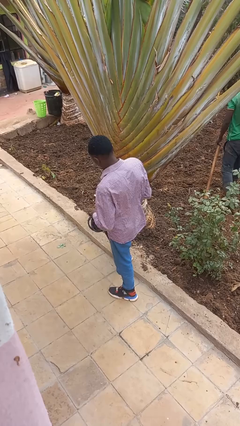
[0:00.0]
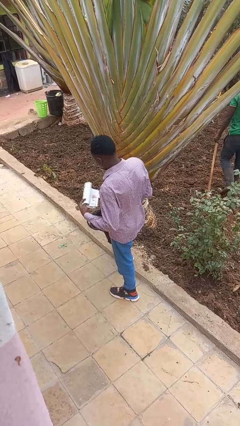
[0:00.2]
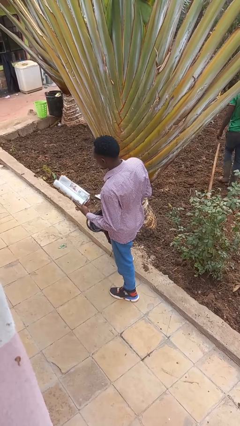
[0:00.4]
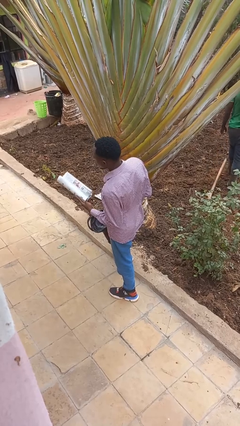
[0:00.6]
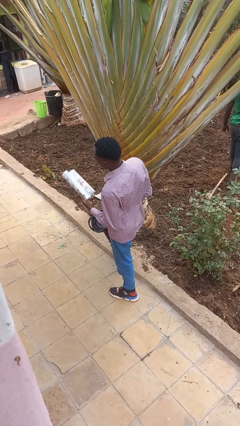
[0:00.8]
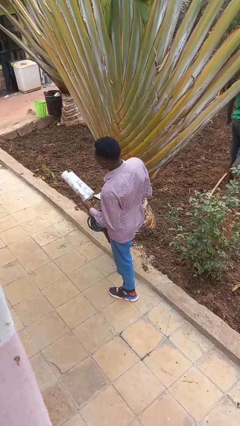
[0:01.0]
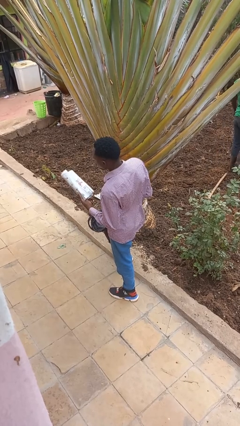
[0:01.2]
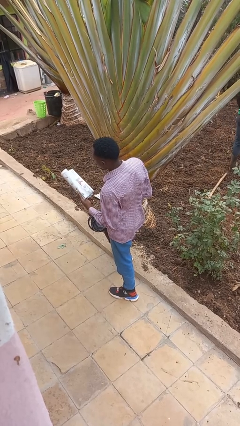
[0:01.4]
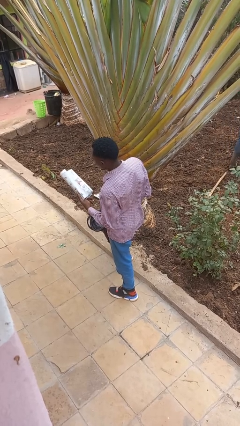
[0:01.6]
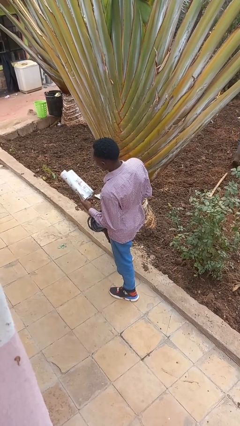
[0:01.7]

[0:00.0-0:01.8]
person takes object from backpack

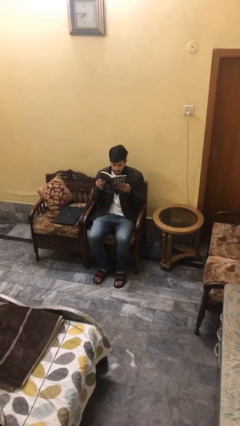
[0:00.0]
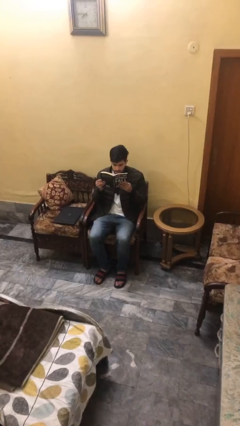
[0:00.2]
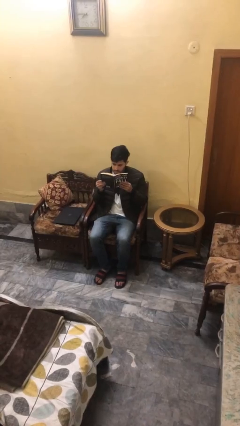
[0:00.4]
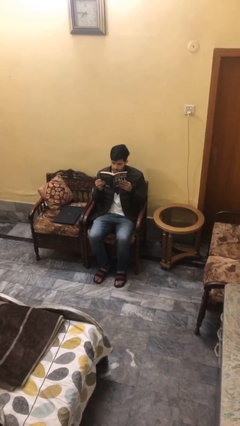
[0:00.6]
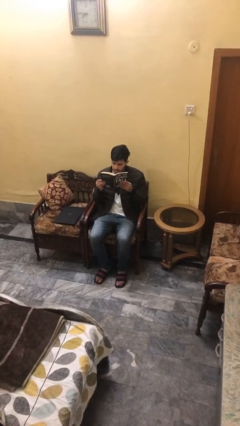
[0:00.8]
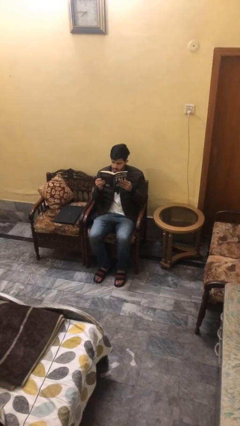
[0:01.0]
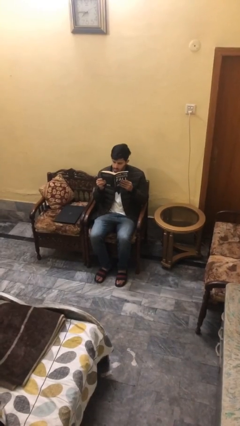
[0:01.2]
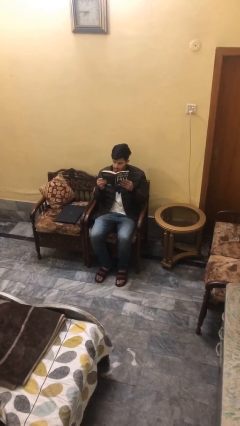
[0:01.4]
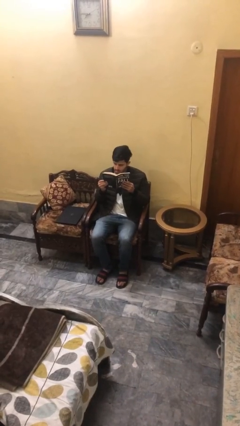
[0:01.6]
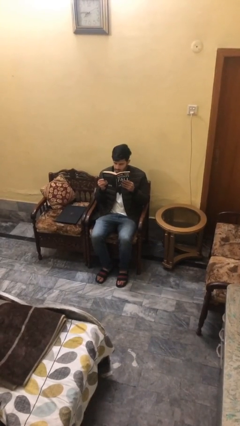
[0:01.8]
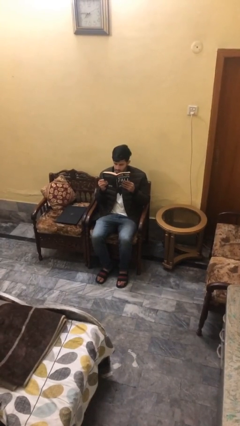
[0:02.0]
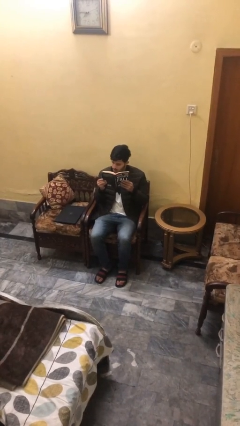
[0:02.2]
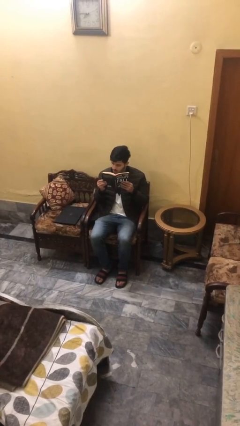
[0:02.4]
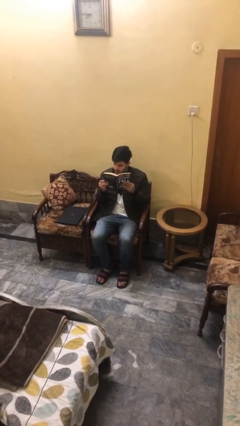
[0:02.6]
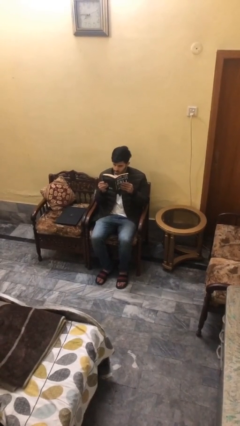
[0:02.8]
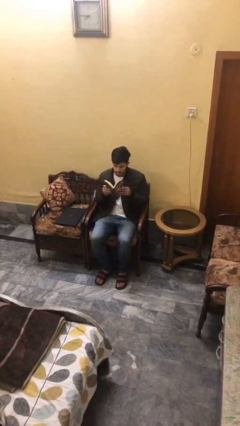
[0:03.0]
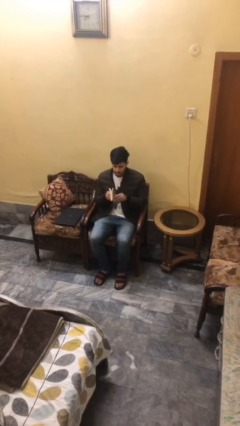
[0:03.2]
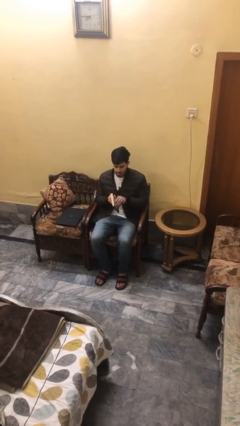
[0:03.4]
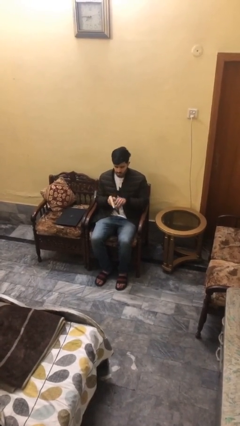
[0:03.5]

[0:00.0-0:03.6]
person reads document

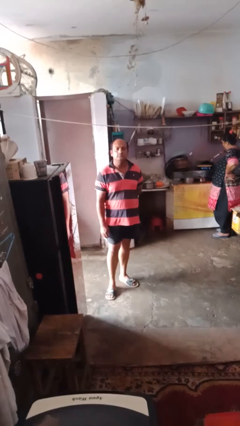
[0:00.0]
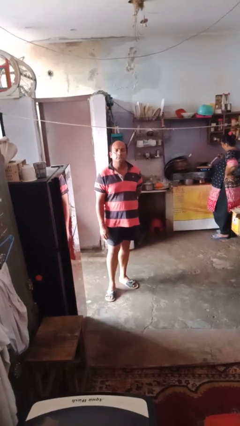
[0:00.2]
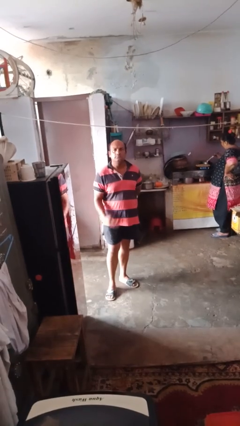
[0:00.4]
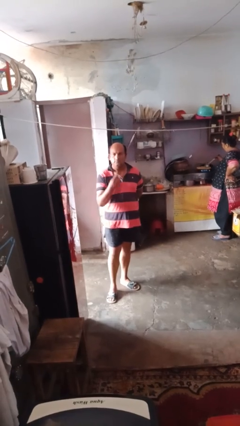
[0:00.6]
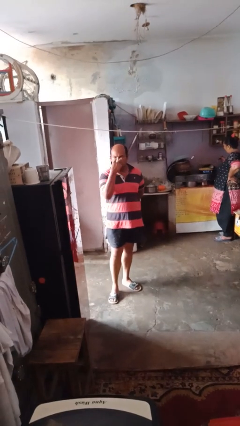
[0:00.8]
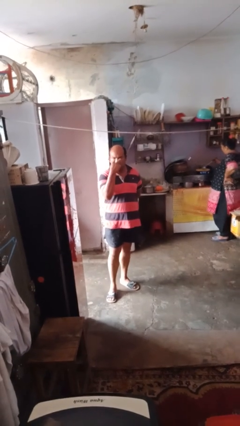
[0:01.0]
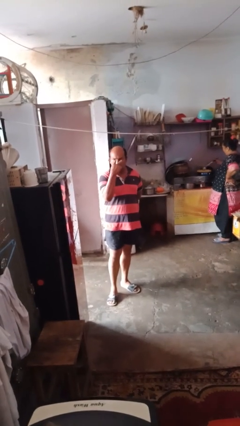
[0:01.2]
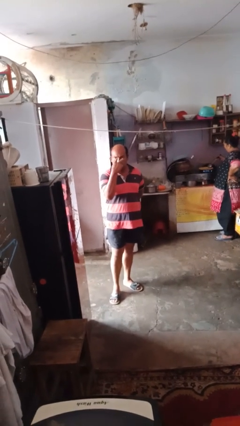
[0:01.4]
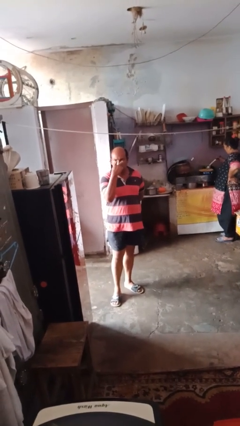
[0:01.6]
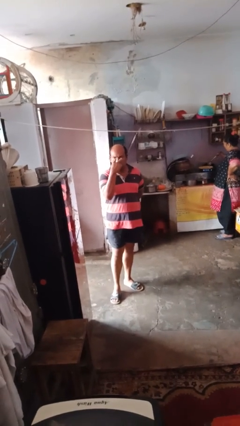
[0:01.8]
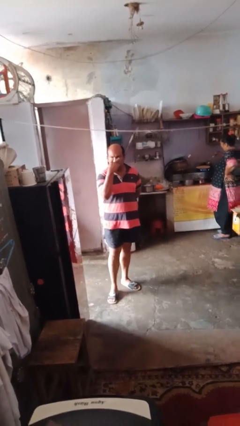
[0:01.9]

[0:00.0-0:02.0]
person gestures behind me

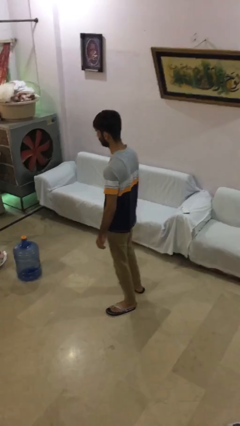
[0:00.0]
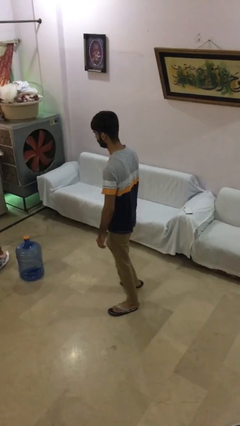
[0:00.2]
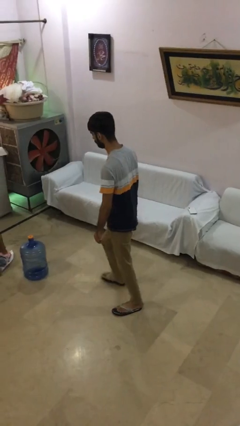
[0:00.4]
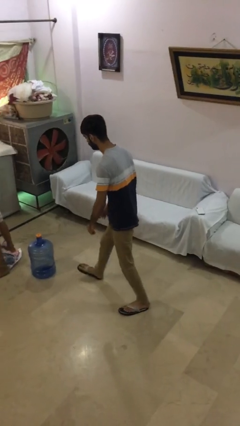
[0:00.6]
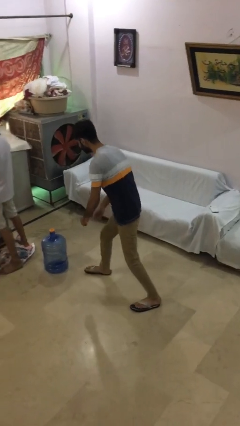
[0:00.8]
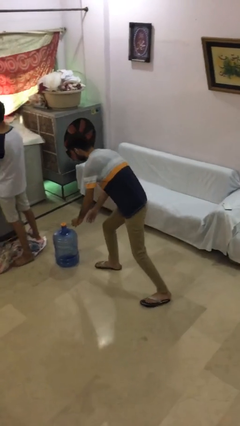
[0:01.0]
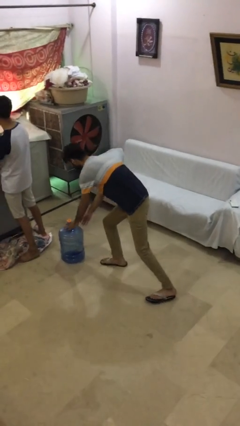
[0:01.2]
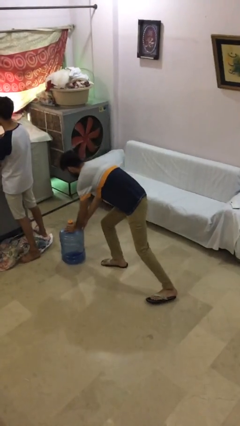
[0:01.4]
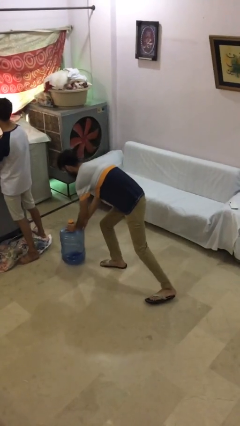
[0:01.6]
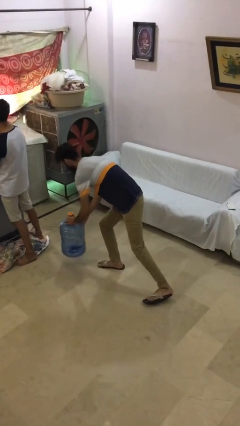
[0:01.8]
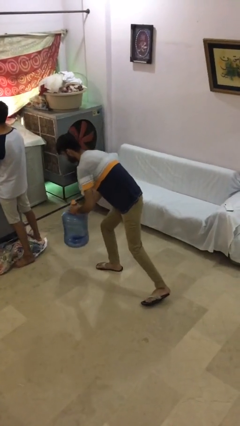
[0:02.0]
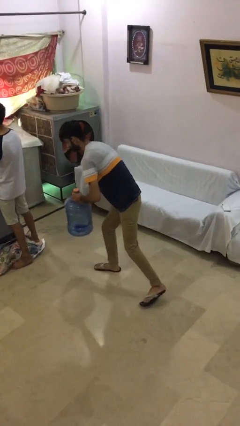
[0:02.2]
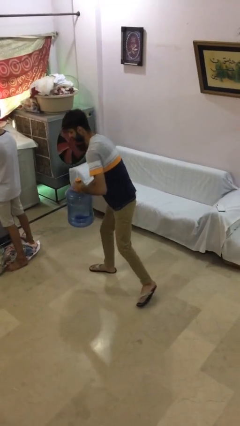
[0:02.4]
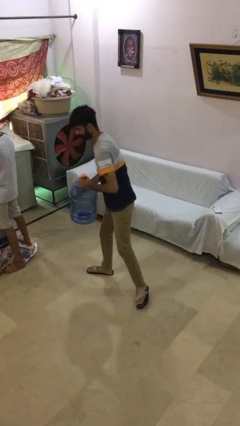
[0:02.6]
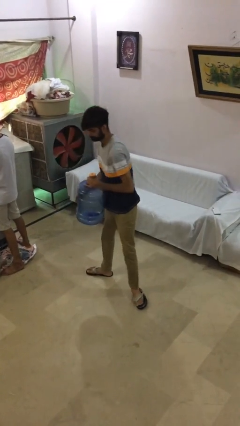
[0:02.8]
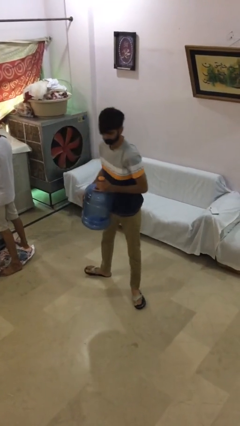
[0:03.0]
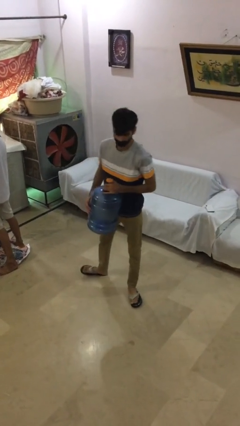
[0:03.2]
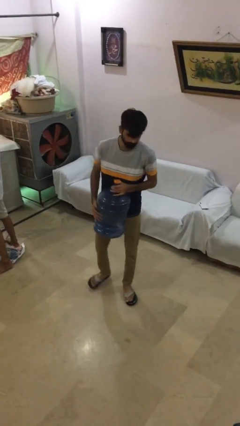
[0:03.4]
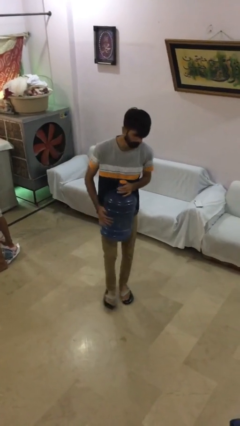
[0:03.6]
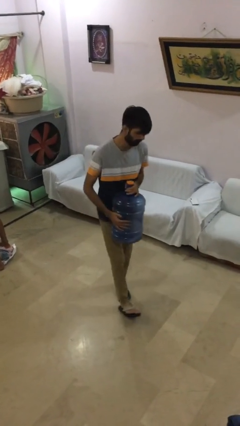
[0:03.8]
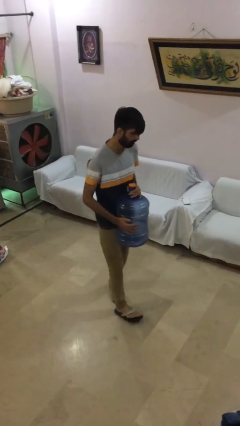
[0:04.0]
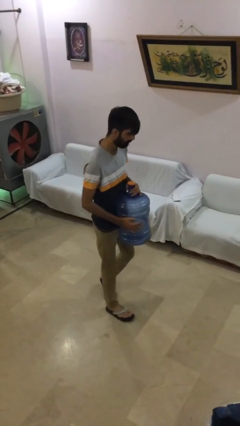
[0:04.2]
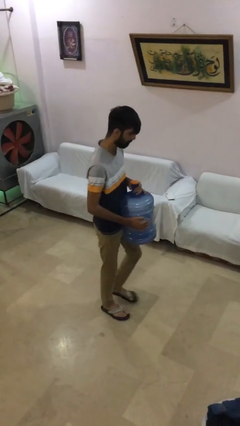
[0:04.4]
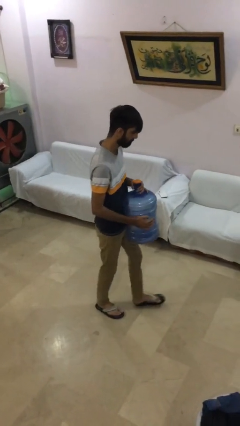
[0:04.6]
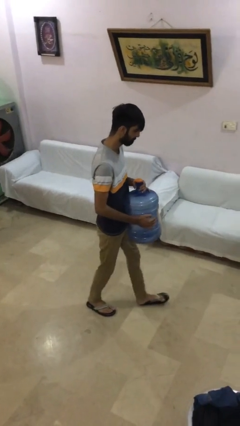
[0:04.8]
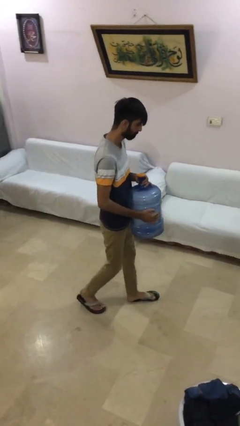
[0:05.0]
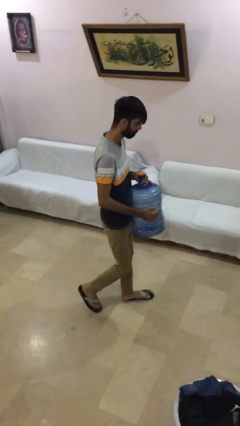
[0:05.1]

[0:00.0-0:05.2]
person steals object from person

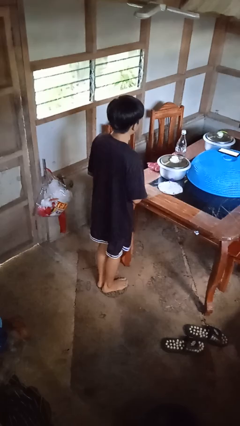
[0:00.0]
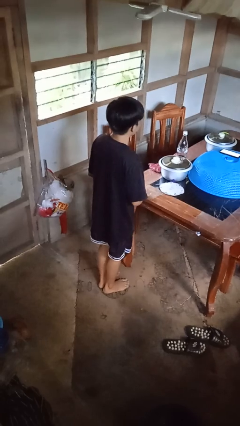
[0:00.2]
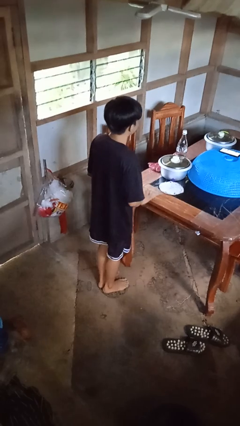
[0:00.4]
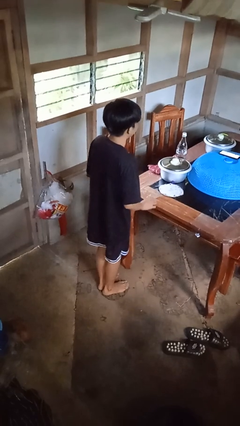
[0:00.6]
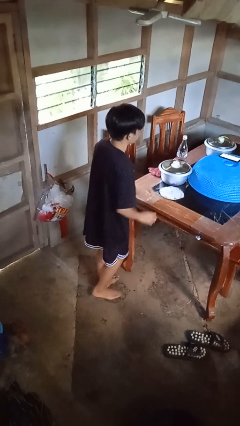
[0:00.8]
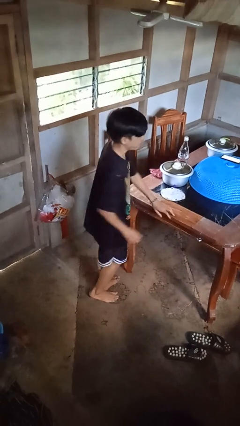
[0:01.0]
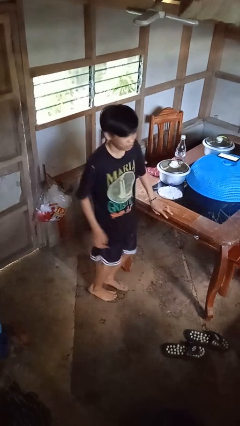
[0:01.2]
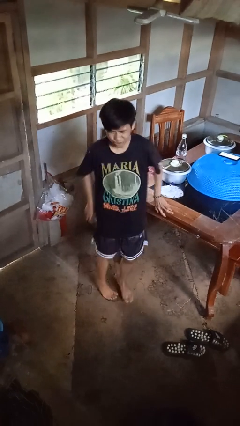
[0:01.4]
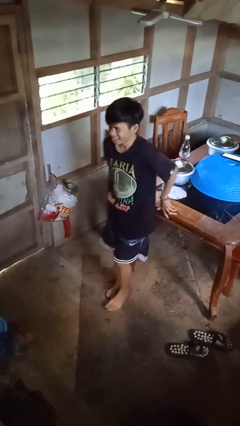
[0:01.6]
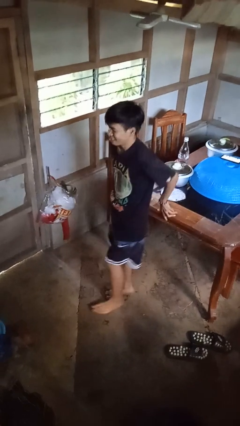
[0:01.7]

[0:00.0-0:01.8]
person twirls

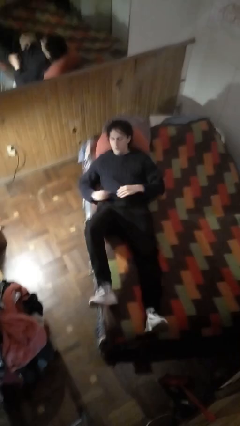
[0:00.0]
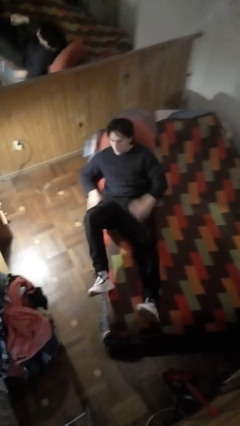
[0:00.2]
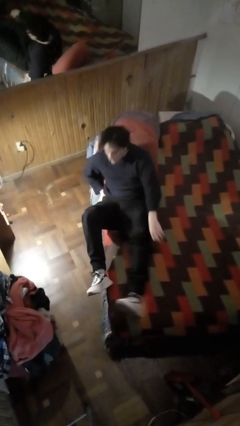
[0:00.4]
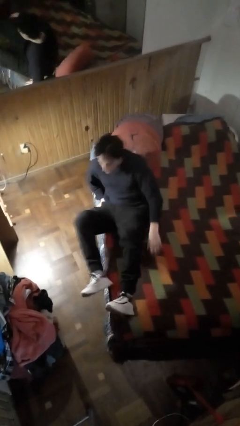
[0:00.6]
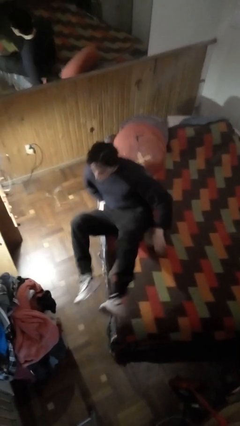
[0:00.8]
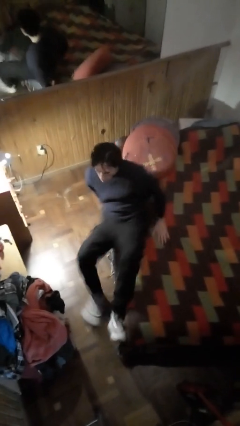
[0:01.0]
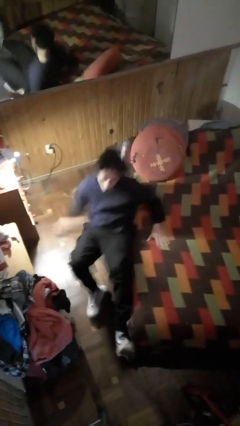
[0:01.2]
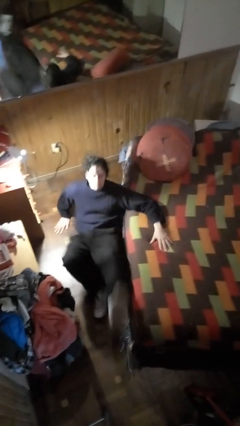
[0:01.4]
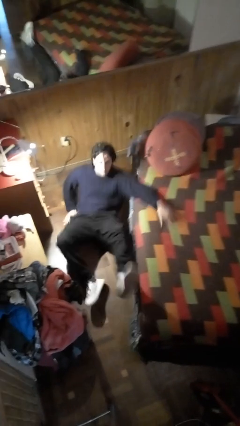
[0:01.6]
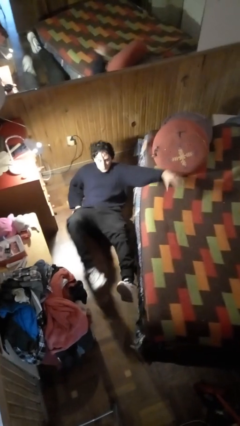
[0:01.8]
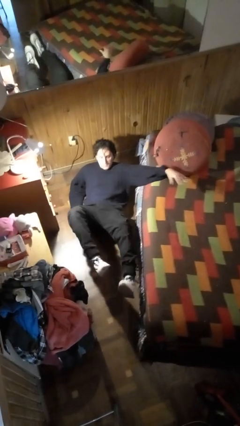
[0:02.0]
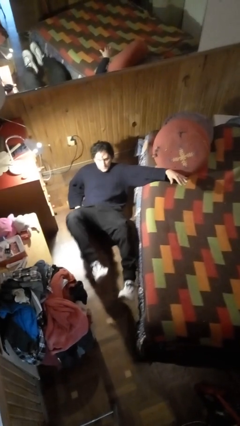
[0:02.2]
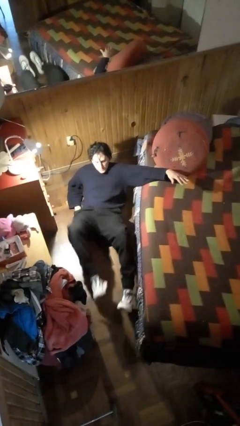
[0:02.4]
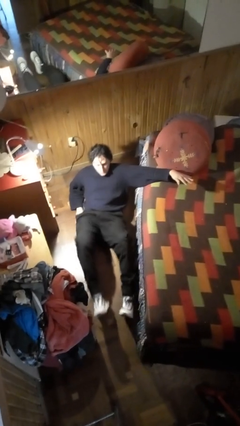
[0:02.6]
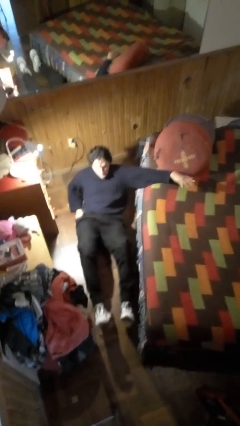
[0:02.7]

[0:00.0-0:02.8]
person falls from bed
